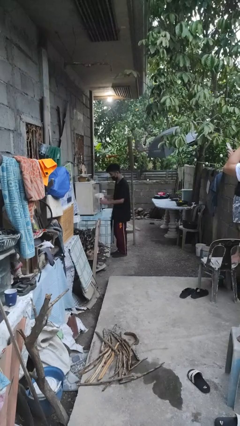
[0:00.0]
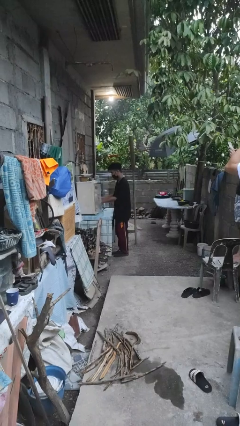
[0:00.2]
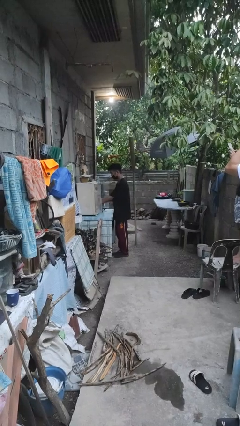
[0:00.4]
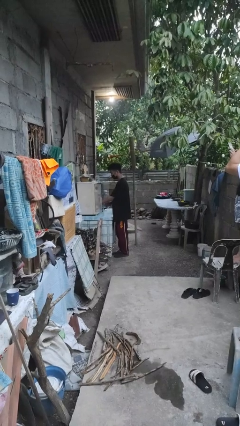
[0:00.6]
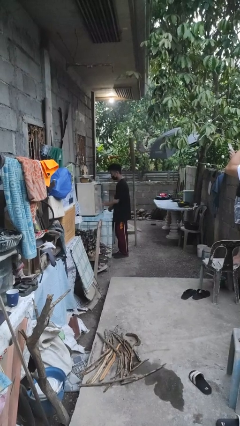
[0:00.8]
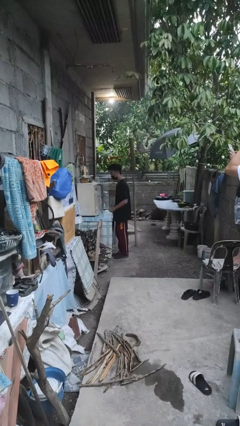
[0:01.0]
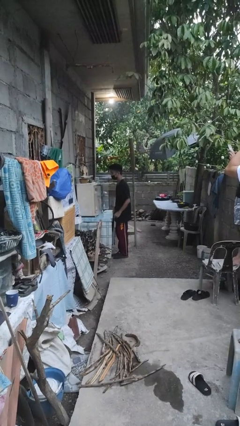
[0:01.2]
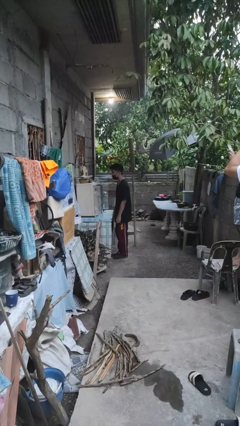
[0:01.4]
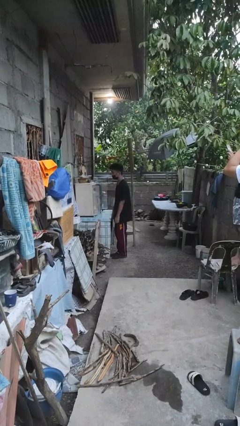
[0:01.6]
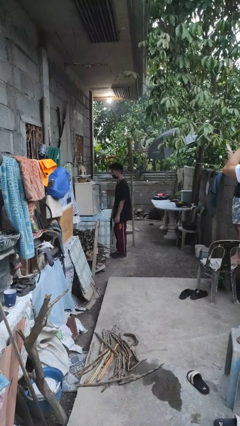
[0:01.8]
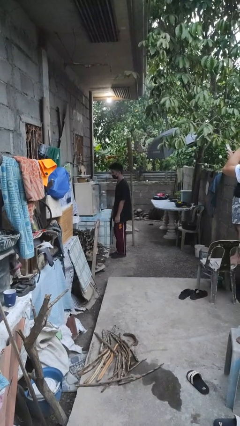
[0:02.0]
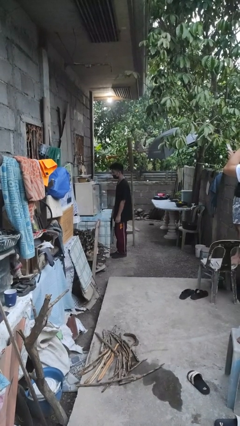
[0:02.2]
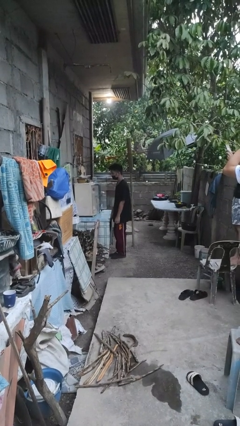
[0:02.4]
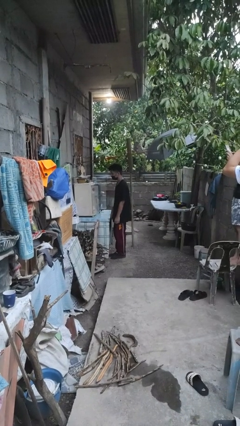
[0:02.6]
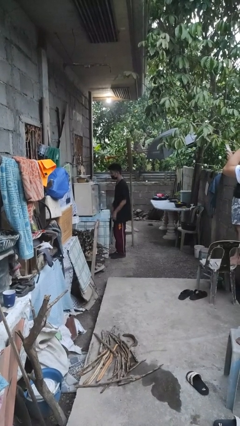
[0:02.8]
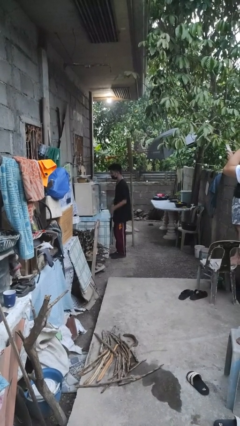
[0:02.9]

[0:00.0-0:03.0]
person puts down object into cabinet

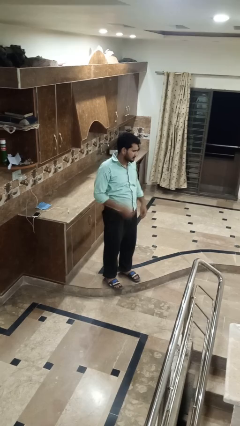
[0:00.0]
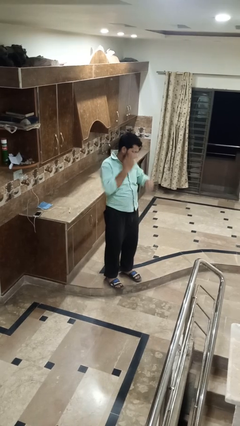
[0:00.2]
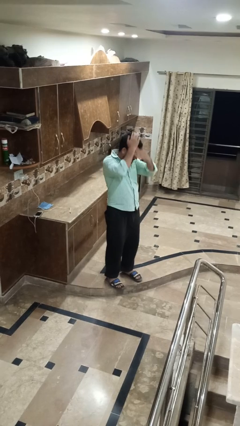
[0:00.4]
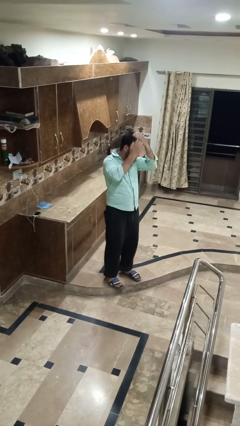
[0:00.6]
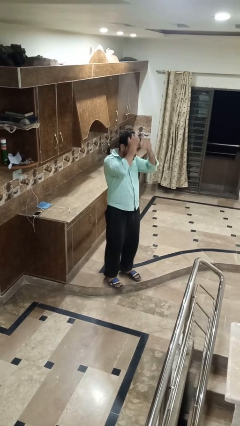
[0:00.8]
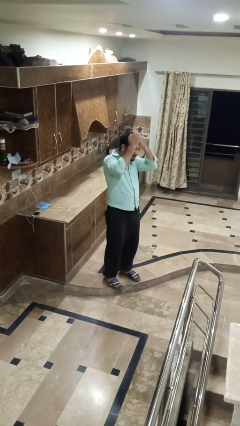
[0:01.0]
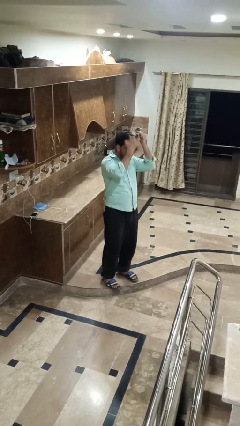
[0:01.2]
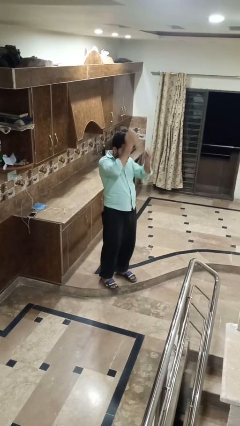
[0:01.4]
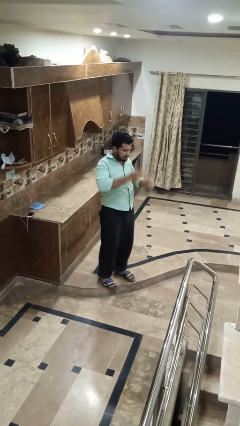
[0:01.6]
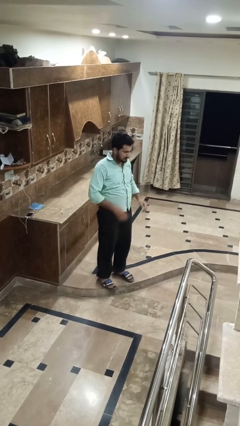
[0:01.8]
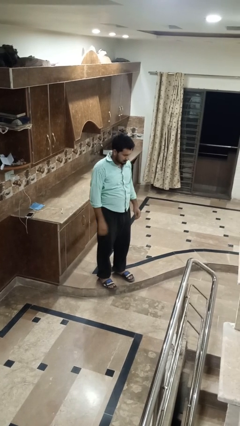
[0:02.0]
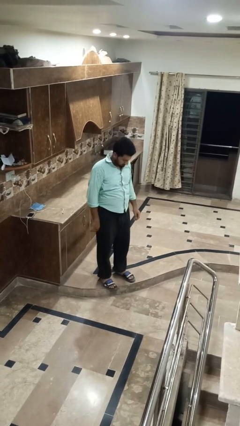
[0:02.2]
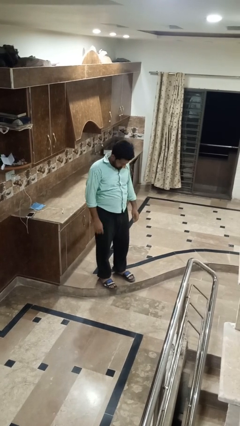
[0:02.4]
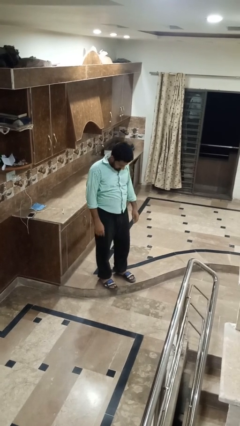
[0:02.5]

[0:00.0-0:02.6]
person strokes hair

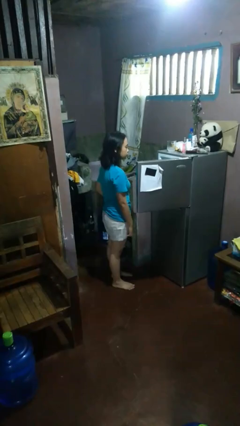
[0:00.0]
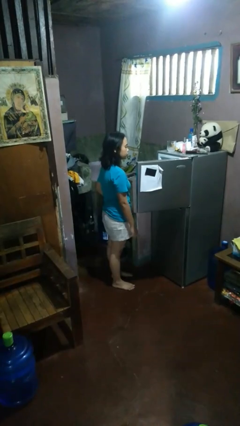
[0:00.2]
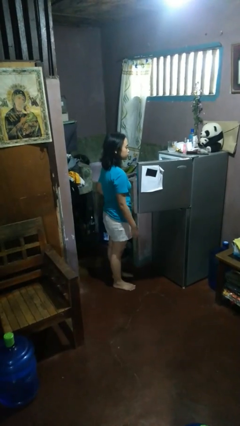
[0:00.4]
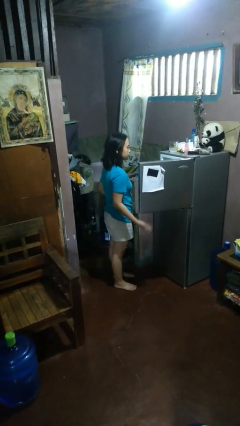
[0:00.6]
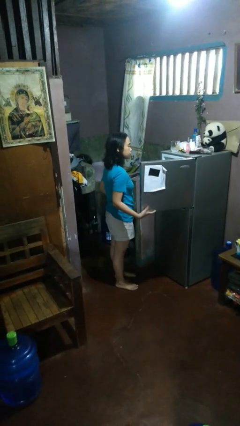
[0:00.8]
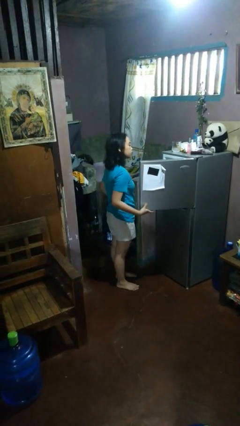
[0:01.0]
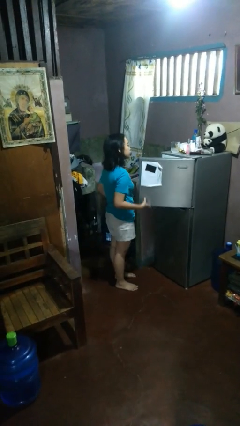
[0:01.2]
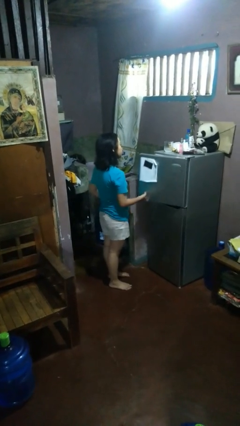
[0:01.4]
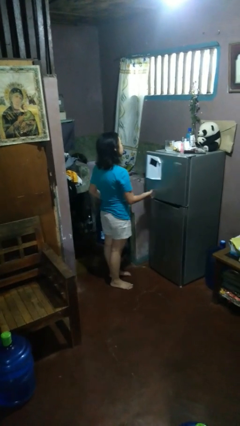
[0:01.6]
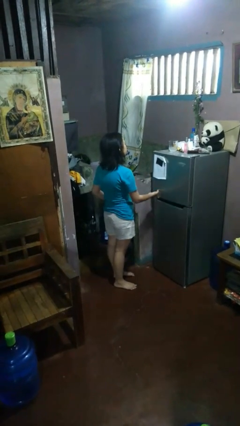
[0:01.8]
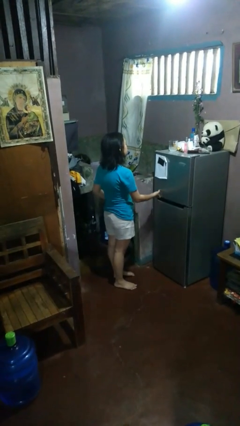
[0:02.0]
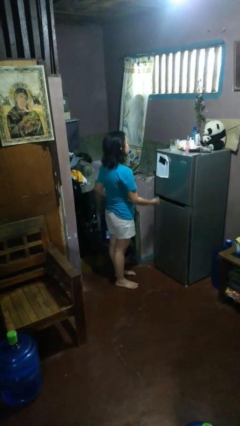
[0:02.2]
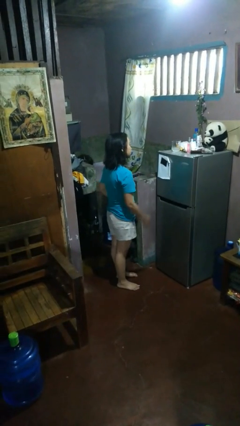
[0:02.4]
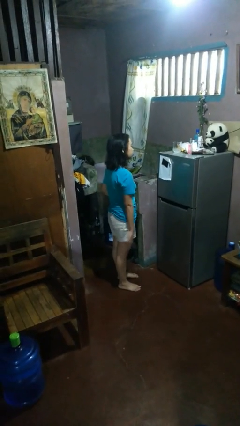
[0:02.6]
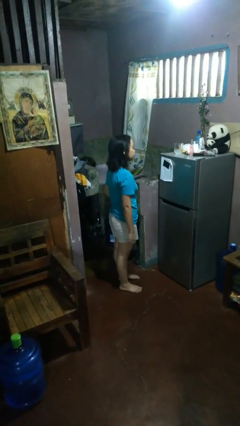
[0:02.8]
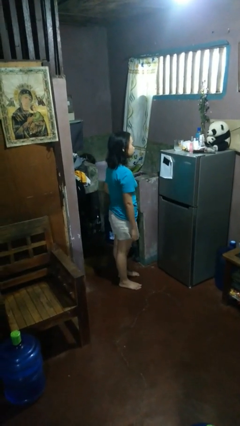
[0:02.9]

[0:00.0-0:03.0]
person closes refrigerator

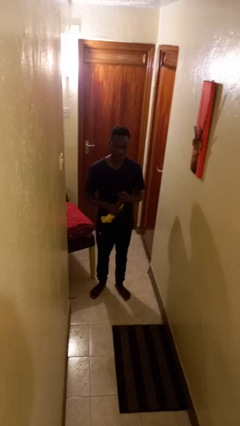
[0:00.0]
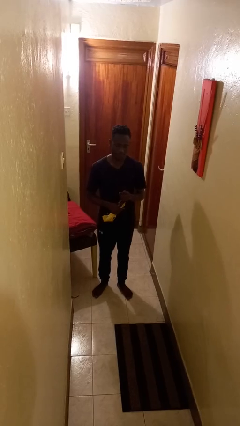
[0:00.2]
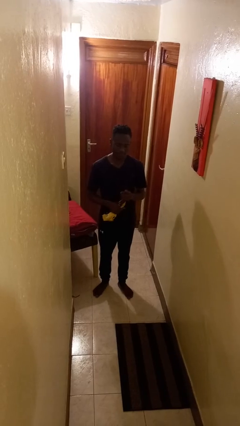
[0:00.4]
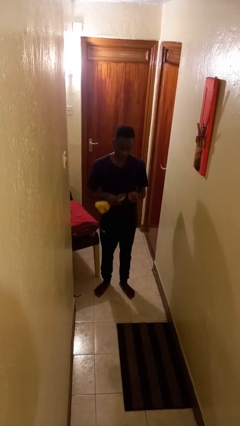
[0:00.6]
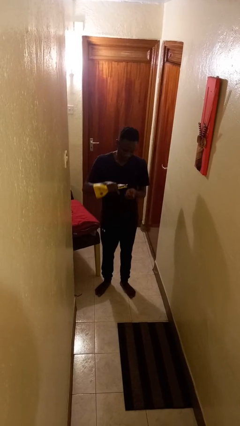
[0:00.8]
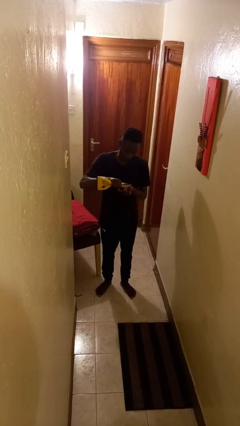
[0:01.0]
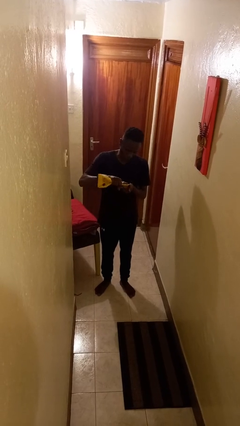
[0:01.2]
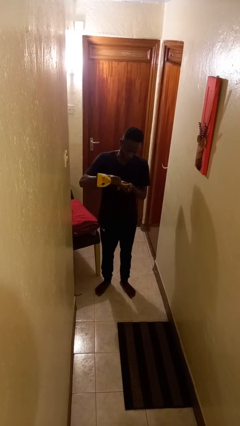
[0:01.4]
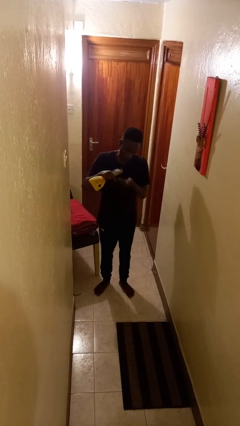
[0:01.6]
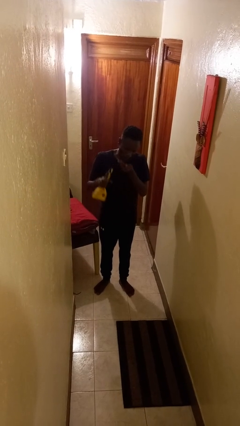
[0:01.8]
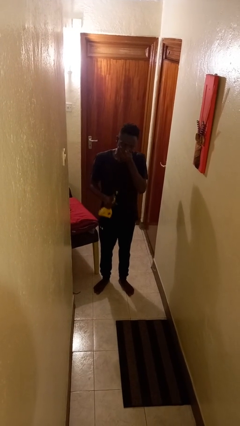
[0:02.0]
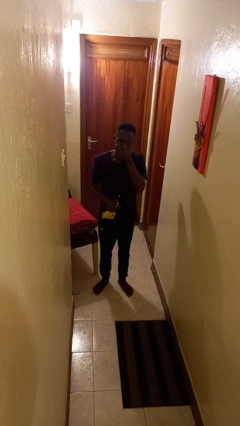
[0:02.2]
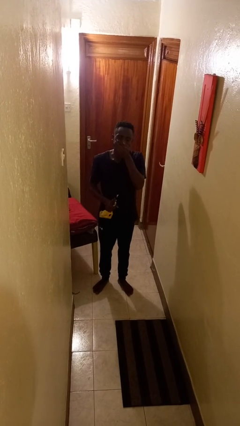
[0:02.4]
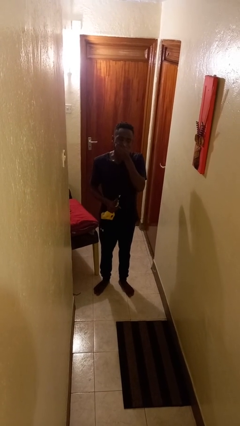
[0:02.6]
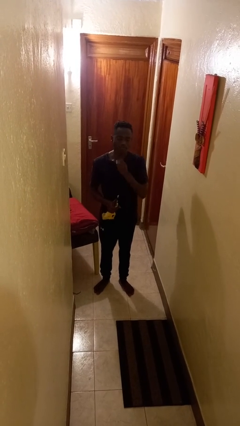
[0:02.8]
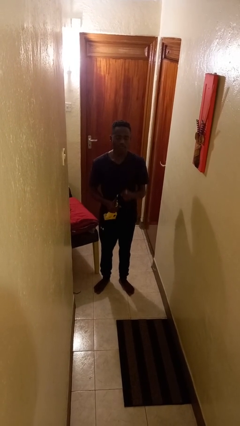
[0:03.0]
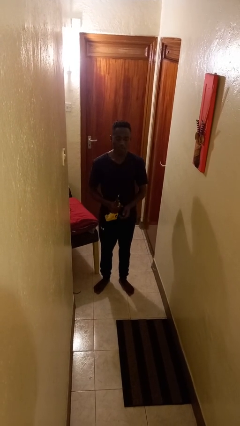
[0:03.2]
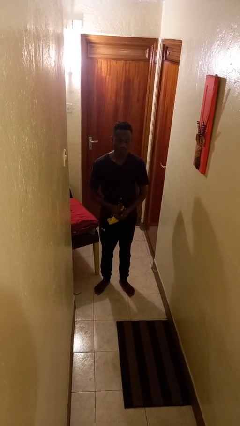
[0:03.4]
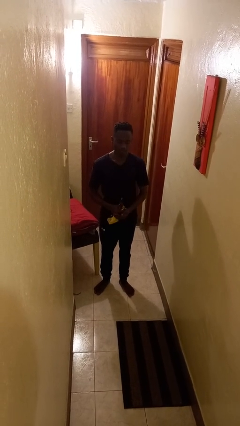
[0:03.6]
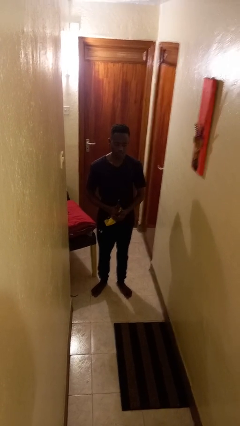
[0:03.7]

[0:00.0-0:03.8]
person eats snack from bag

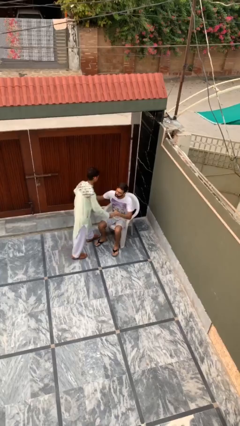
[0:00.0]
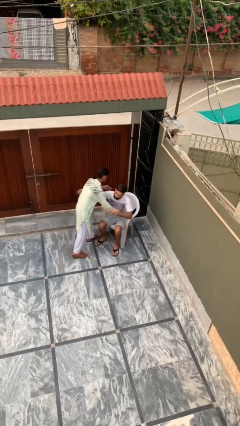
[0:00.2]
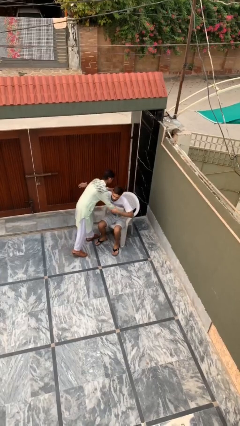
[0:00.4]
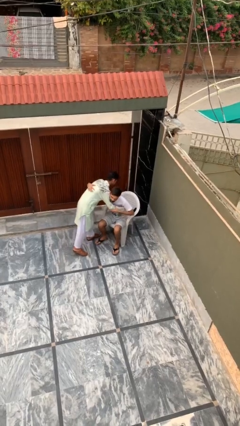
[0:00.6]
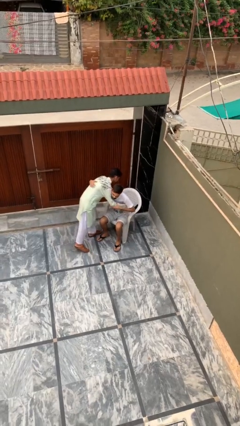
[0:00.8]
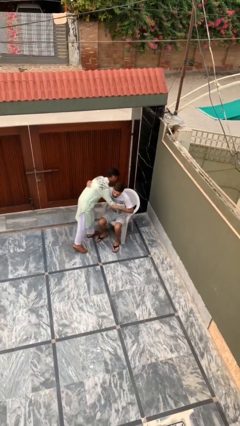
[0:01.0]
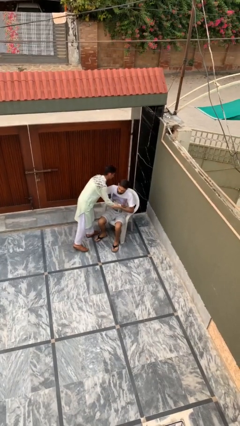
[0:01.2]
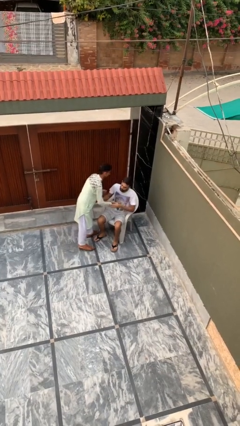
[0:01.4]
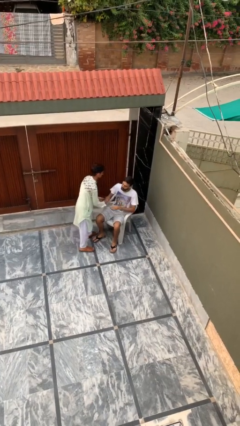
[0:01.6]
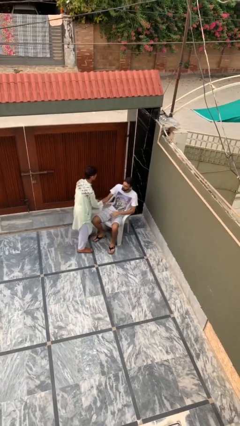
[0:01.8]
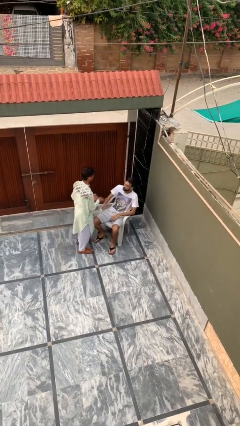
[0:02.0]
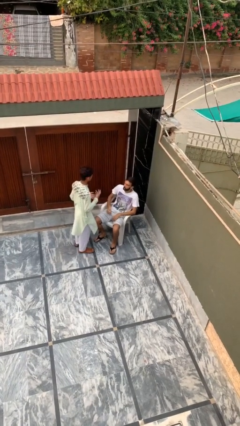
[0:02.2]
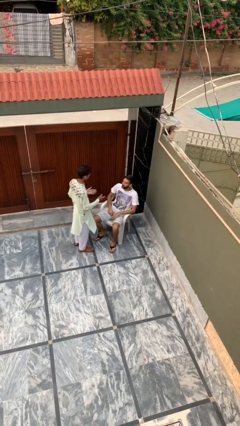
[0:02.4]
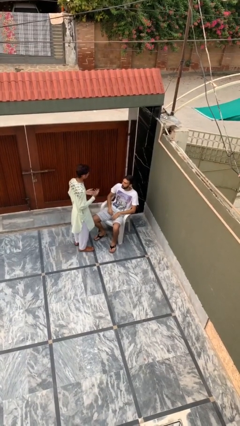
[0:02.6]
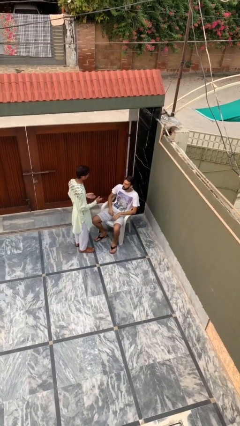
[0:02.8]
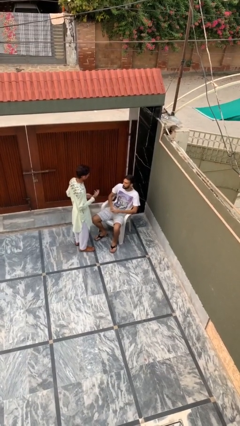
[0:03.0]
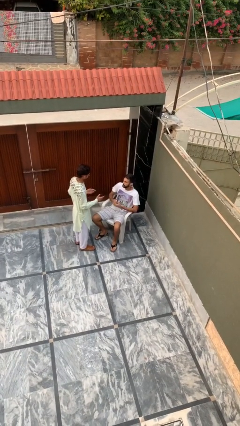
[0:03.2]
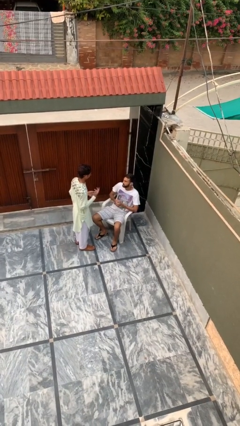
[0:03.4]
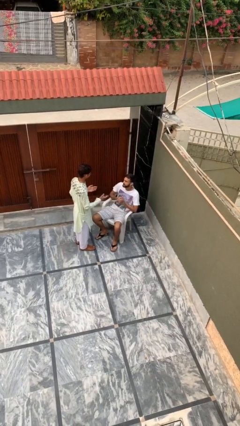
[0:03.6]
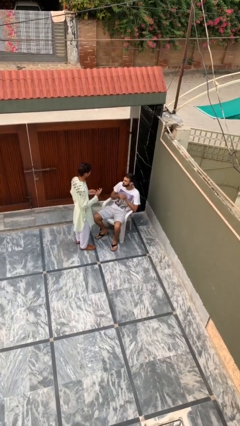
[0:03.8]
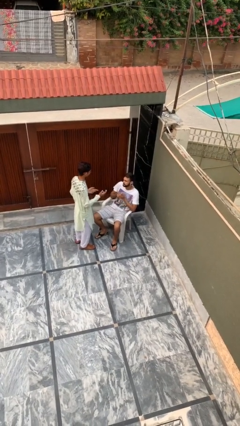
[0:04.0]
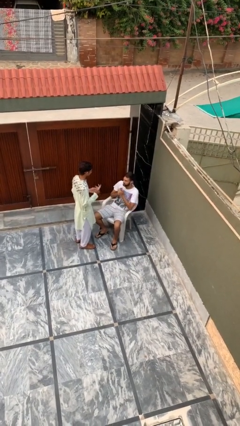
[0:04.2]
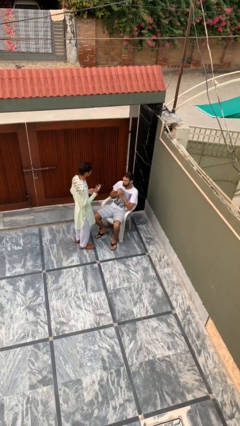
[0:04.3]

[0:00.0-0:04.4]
person embraces person

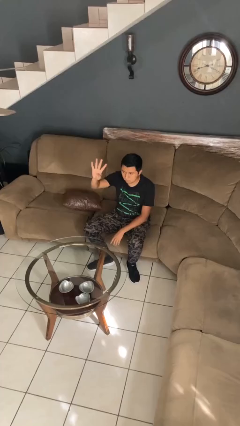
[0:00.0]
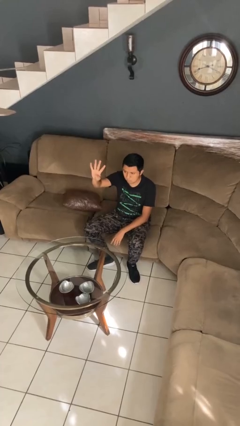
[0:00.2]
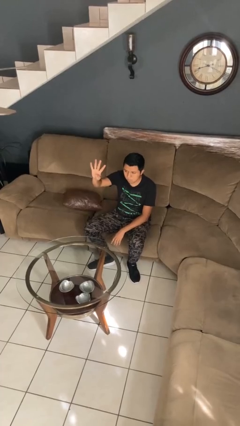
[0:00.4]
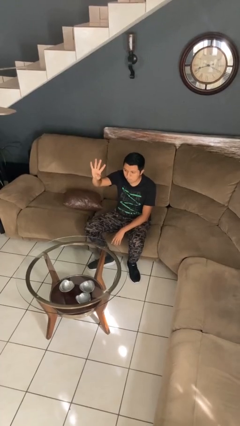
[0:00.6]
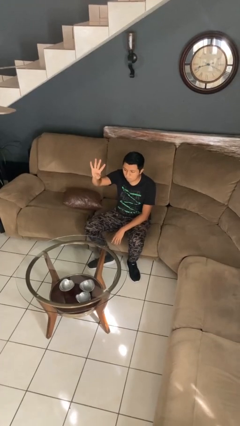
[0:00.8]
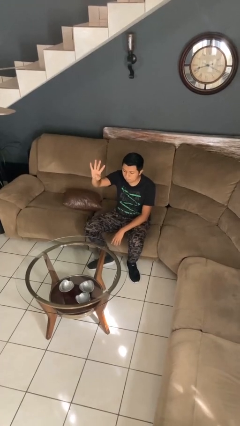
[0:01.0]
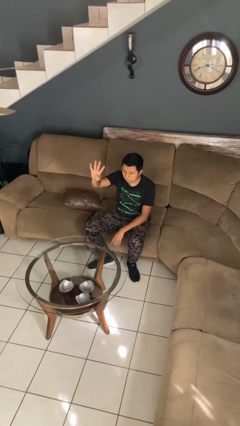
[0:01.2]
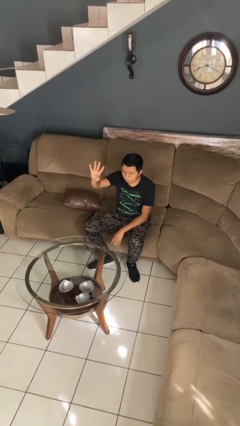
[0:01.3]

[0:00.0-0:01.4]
person gestures number four
